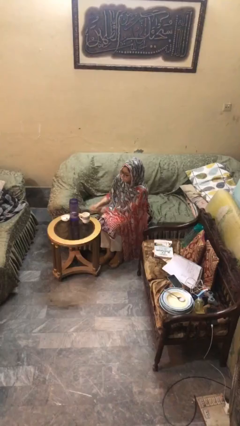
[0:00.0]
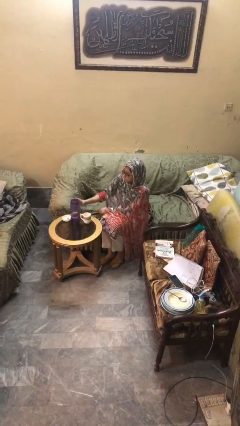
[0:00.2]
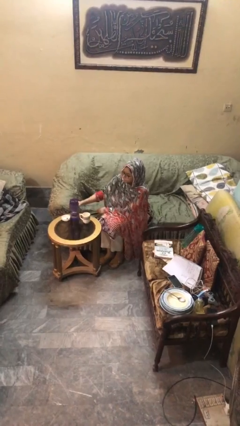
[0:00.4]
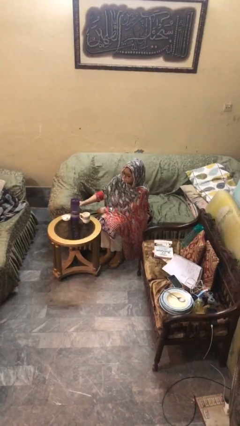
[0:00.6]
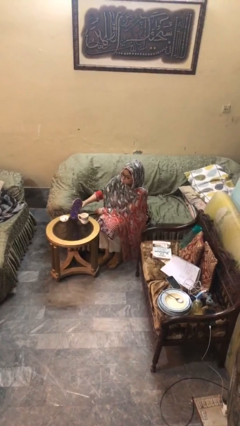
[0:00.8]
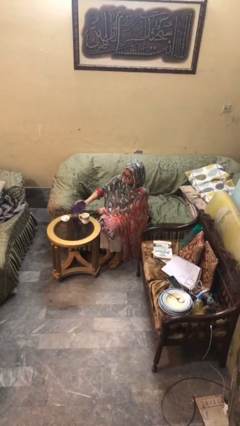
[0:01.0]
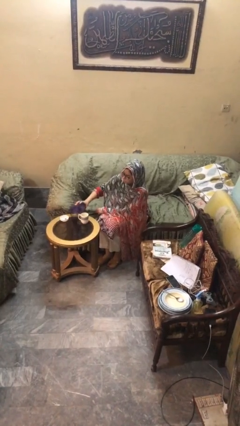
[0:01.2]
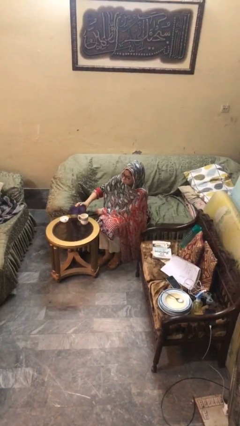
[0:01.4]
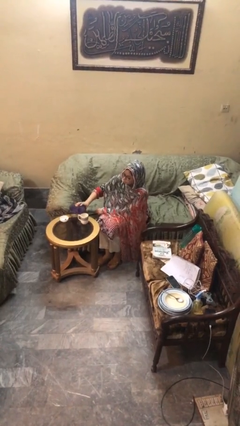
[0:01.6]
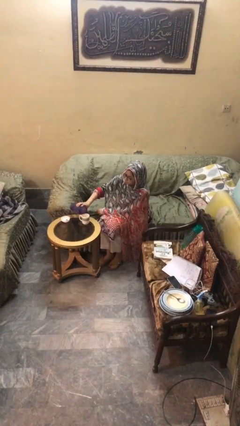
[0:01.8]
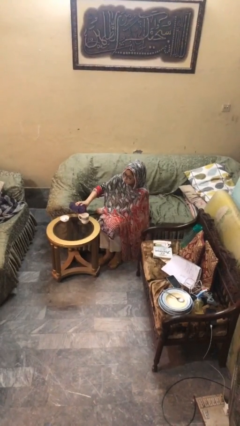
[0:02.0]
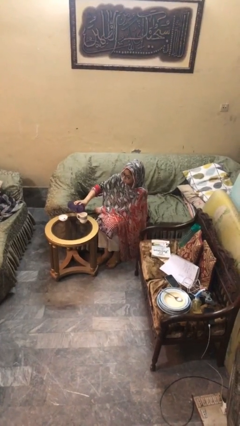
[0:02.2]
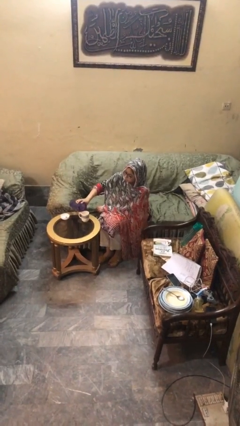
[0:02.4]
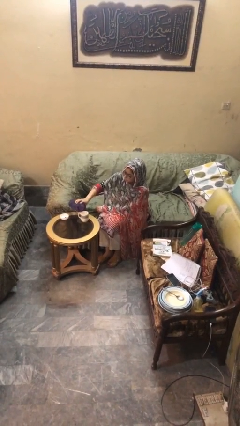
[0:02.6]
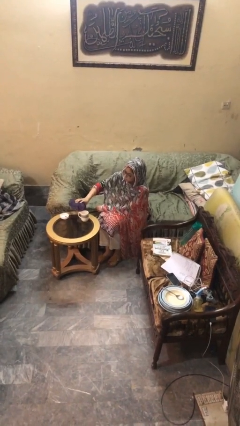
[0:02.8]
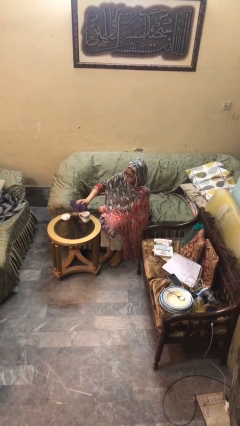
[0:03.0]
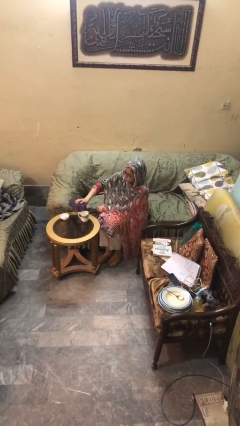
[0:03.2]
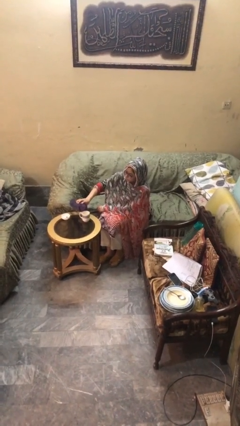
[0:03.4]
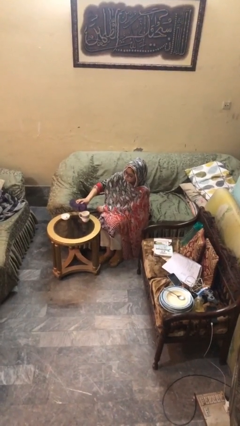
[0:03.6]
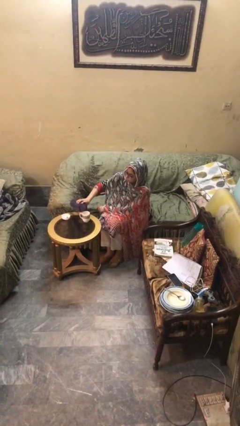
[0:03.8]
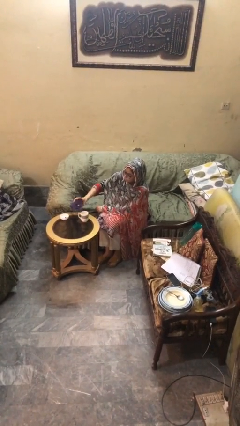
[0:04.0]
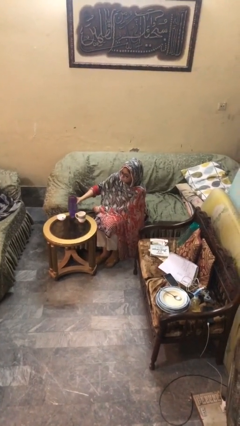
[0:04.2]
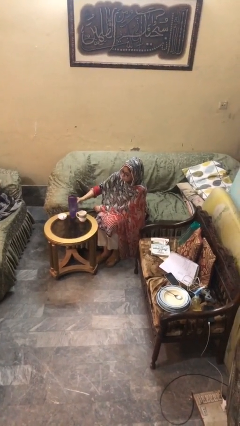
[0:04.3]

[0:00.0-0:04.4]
person pours liquid into cup

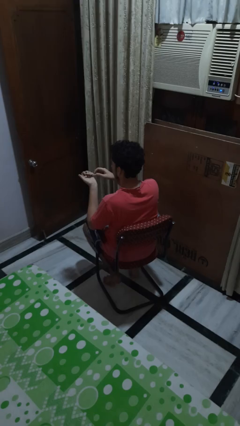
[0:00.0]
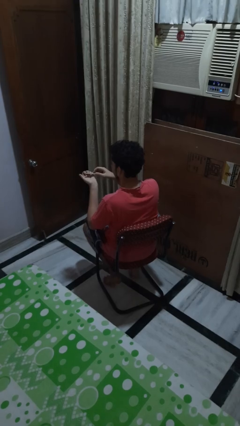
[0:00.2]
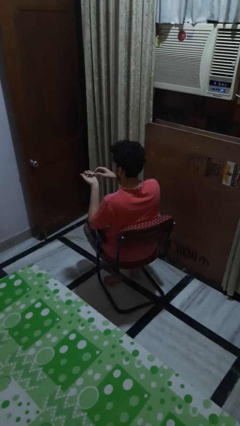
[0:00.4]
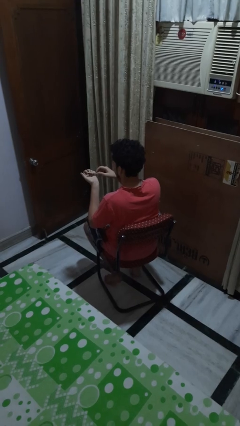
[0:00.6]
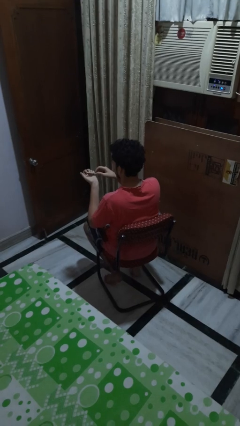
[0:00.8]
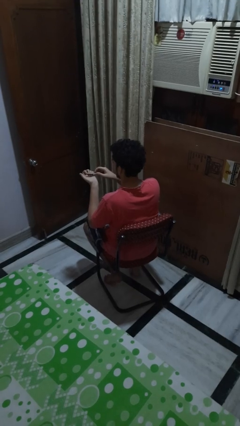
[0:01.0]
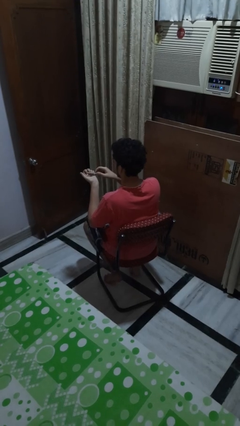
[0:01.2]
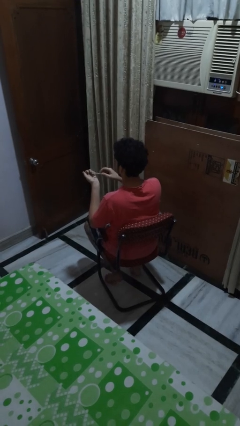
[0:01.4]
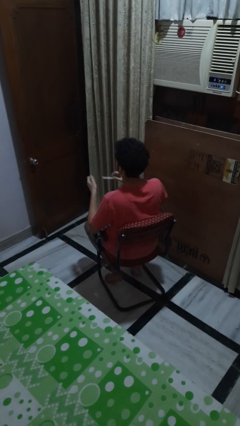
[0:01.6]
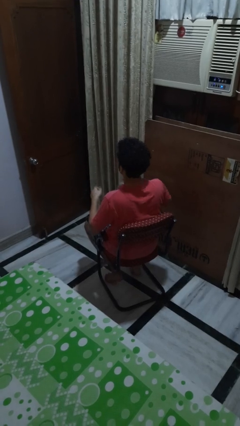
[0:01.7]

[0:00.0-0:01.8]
person files fingernails

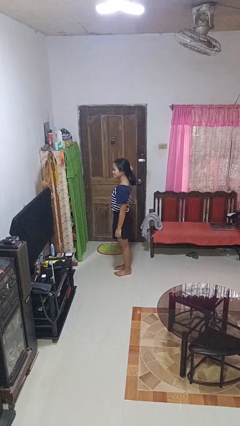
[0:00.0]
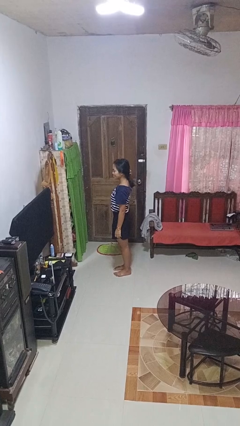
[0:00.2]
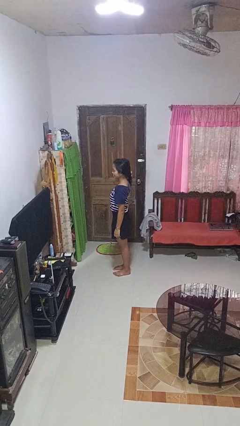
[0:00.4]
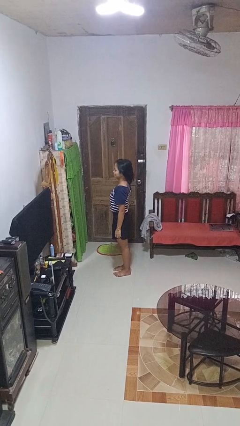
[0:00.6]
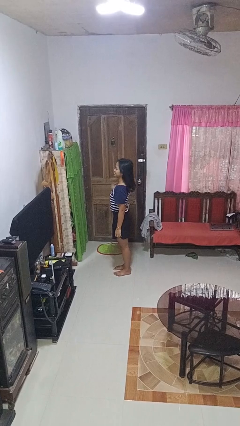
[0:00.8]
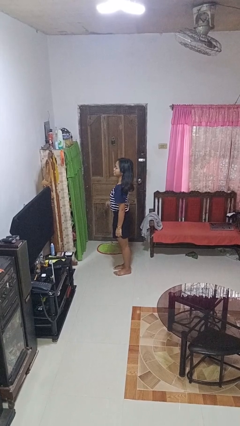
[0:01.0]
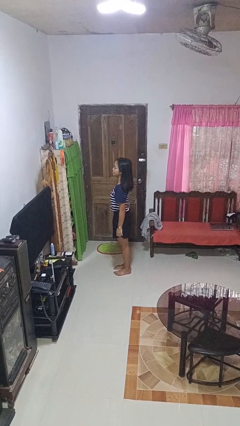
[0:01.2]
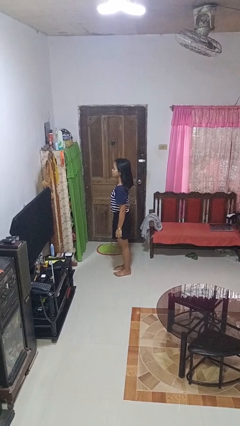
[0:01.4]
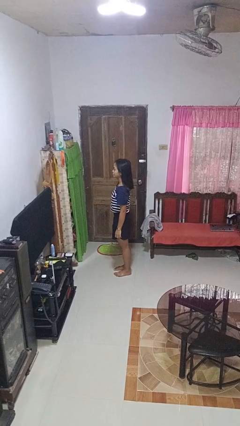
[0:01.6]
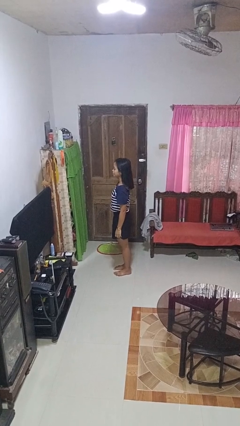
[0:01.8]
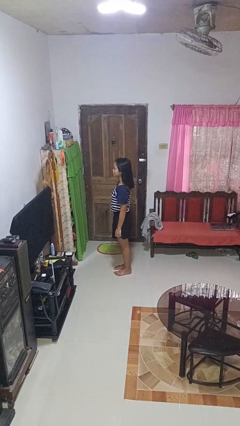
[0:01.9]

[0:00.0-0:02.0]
person takes off hairtie

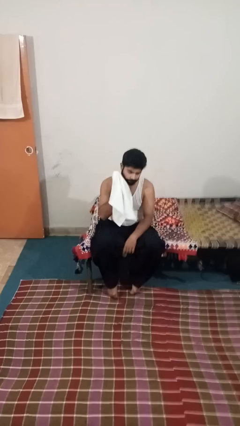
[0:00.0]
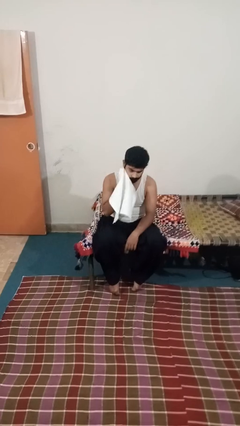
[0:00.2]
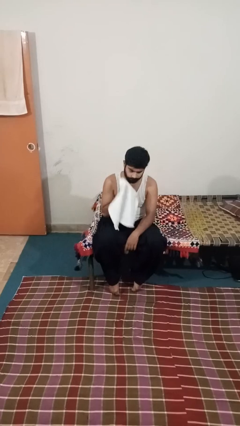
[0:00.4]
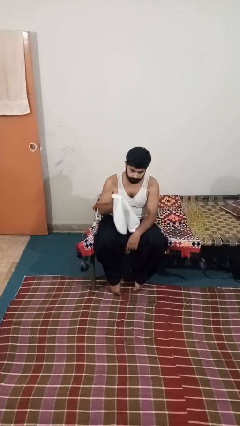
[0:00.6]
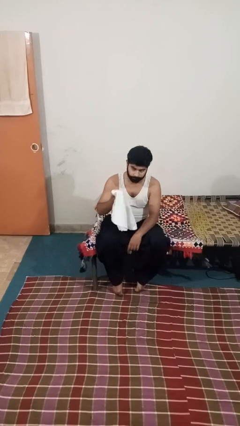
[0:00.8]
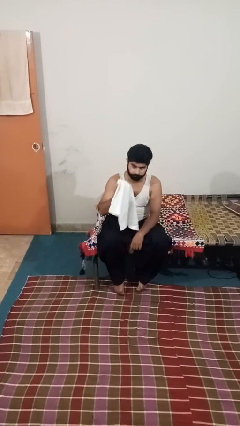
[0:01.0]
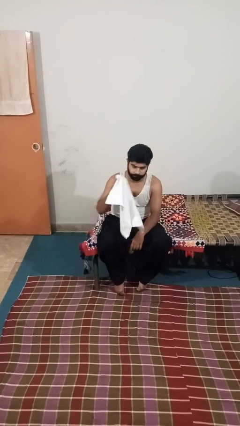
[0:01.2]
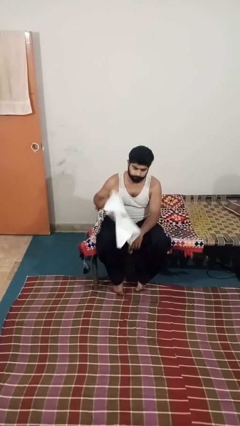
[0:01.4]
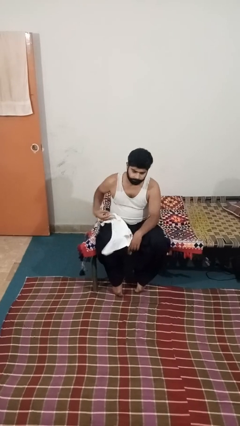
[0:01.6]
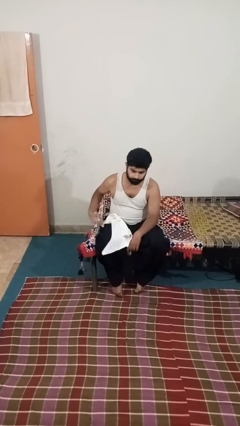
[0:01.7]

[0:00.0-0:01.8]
person wipes mouth with napkin

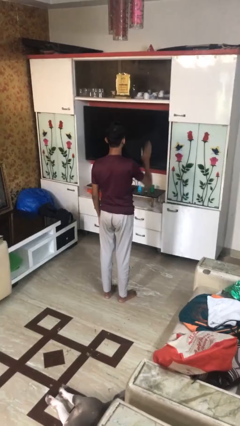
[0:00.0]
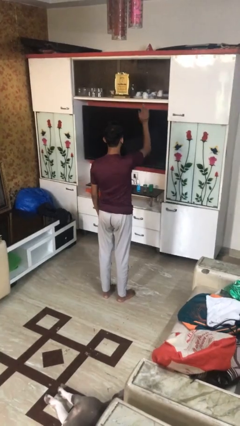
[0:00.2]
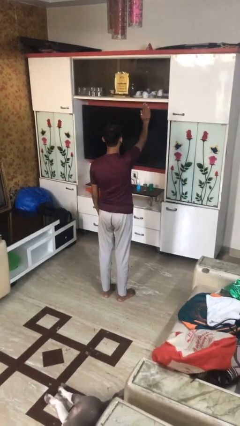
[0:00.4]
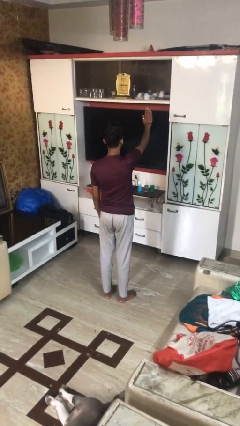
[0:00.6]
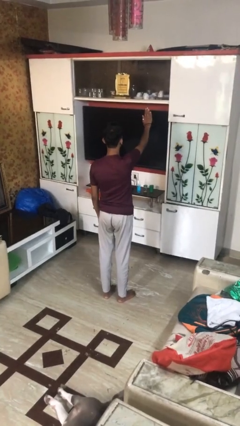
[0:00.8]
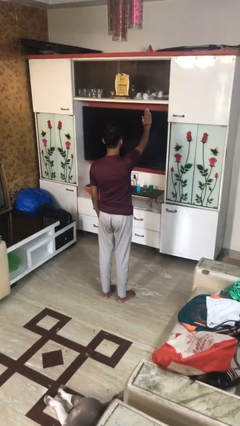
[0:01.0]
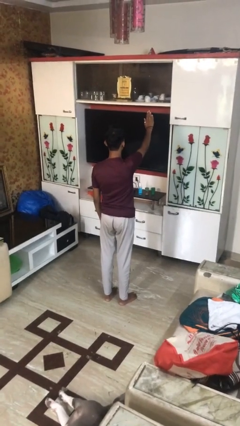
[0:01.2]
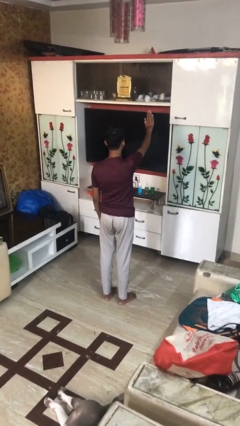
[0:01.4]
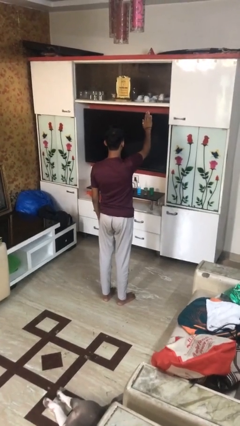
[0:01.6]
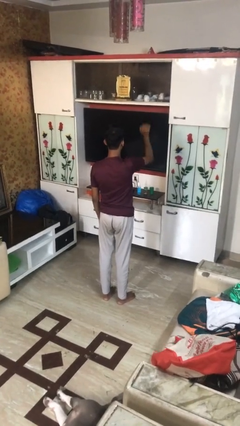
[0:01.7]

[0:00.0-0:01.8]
person gestures stop

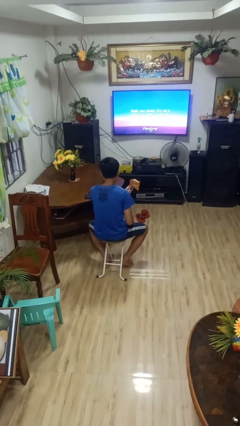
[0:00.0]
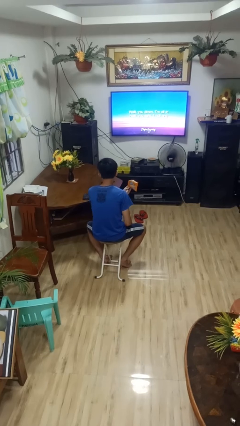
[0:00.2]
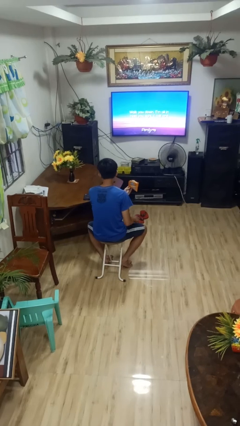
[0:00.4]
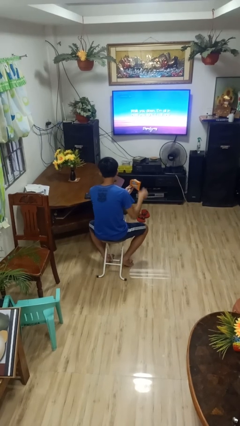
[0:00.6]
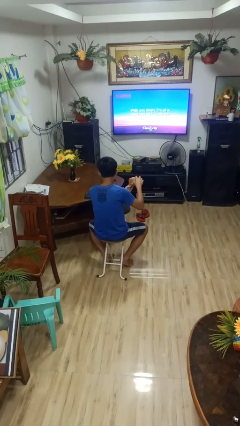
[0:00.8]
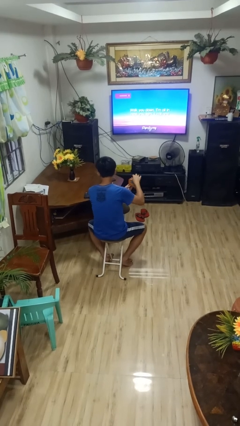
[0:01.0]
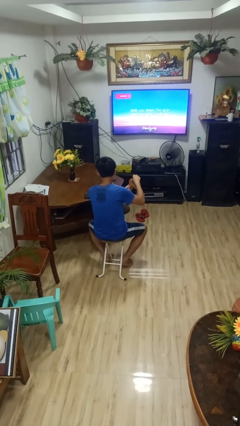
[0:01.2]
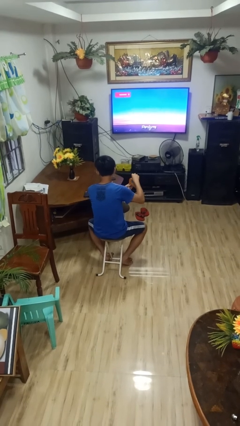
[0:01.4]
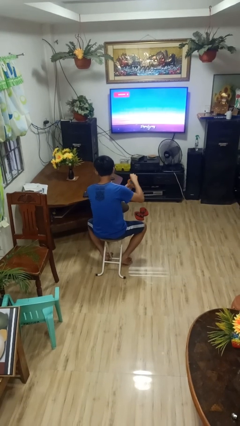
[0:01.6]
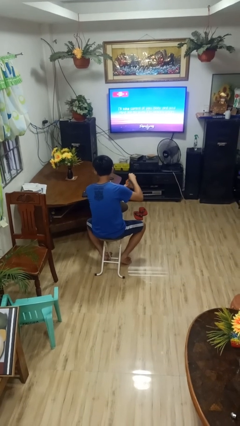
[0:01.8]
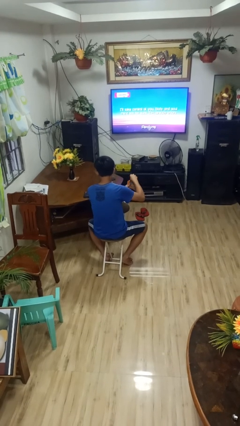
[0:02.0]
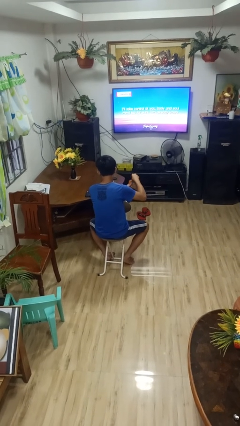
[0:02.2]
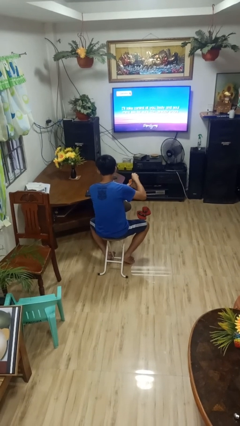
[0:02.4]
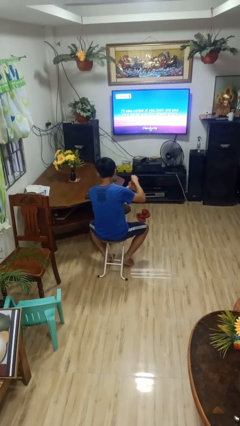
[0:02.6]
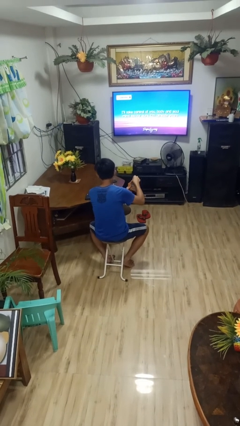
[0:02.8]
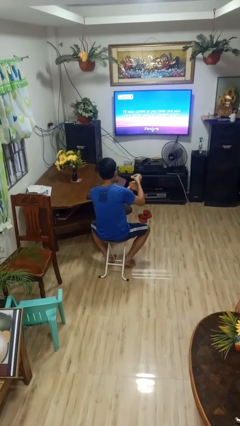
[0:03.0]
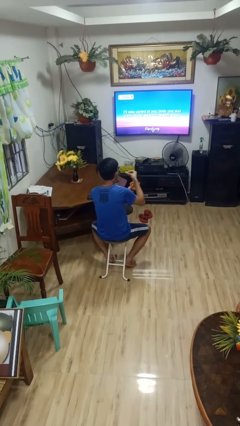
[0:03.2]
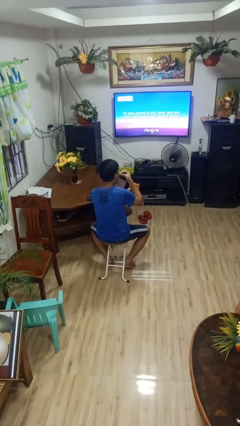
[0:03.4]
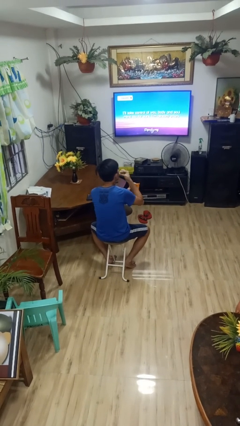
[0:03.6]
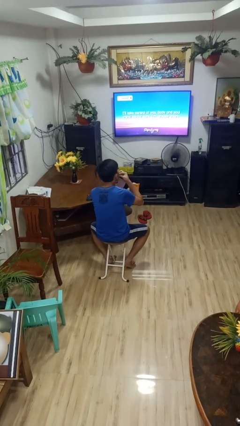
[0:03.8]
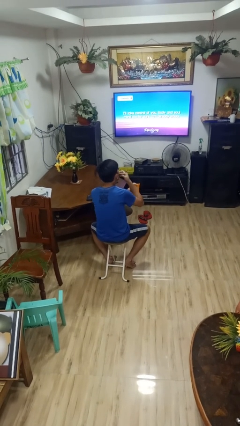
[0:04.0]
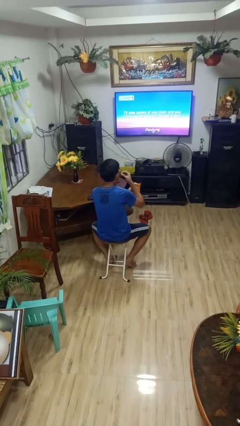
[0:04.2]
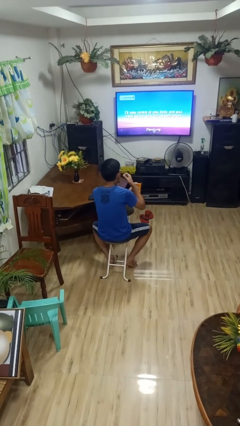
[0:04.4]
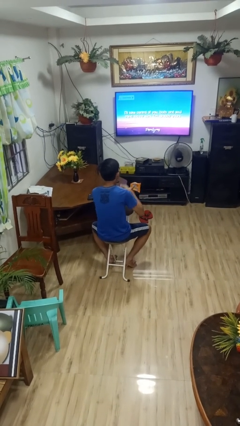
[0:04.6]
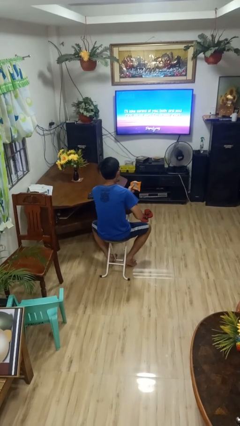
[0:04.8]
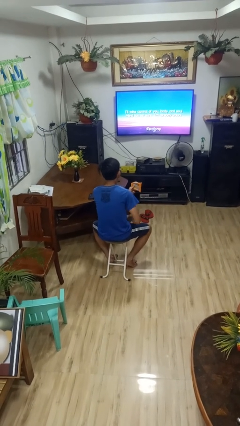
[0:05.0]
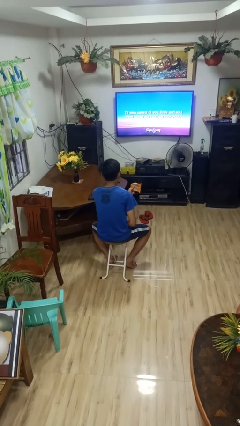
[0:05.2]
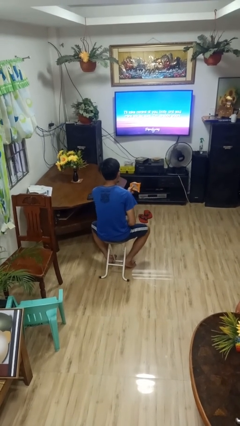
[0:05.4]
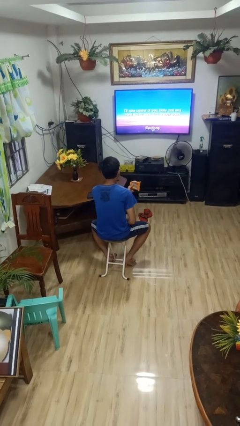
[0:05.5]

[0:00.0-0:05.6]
person eats snack from bag

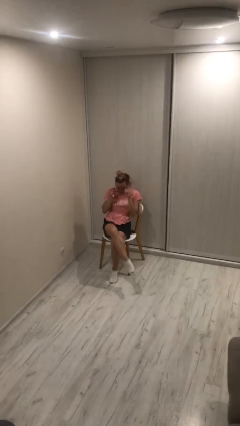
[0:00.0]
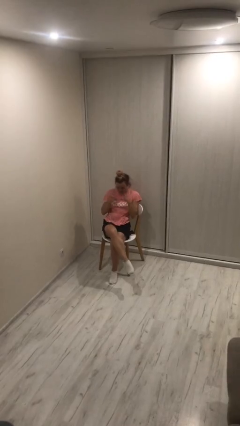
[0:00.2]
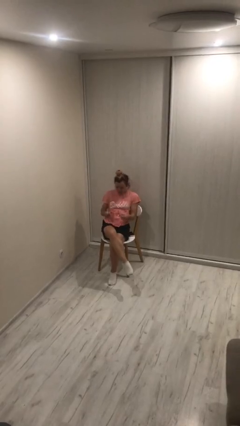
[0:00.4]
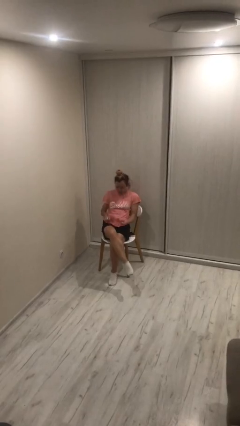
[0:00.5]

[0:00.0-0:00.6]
person takes off glasses
